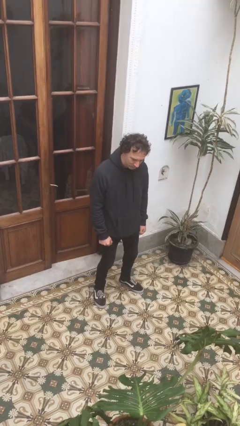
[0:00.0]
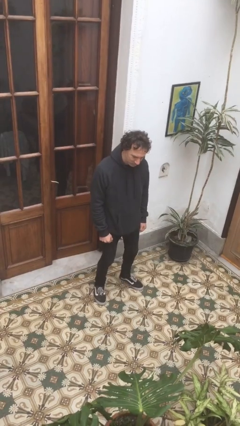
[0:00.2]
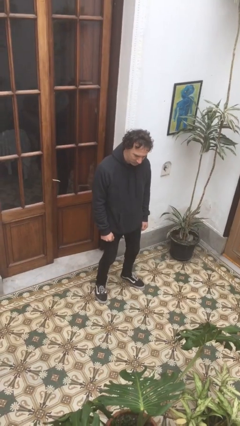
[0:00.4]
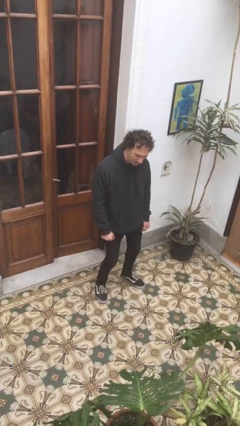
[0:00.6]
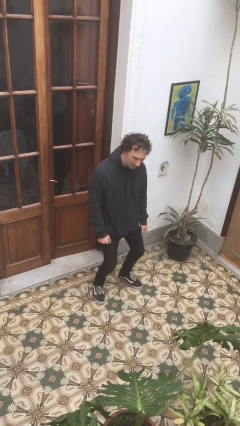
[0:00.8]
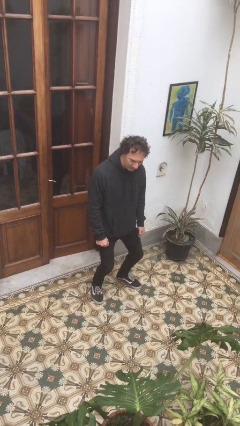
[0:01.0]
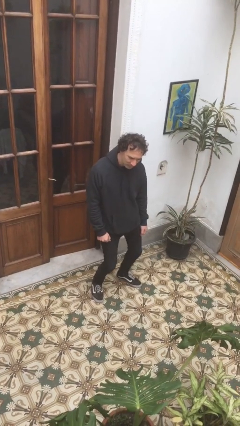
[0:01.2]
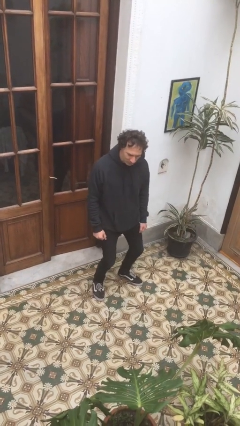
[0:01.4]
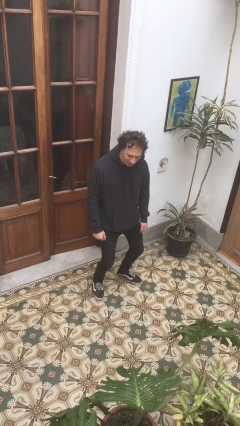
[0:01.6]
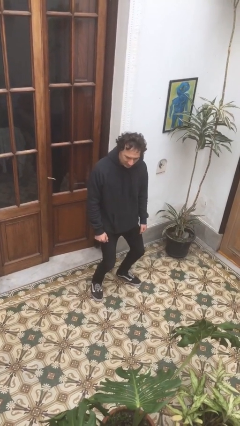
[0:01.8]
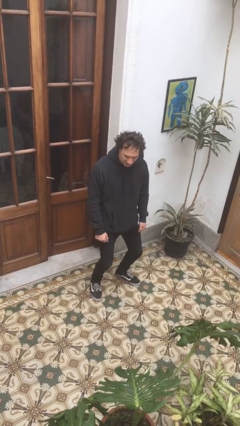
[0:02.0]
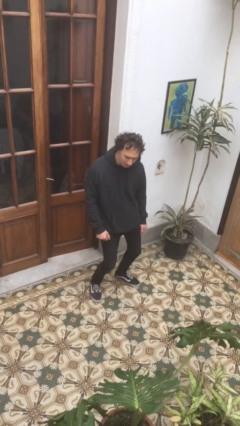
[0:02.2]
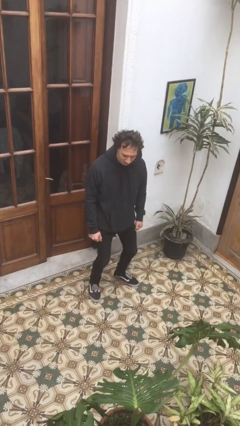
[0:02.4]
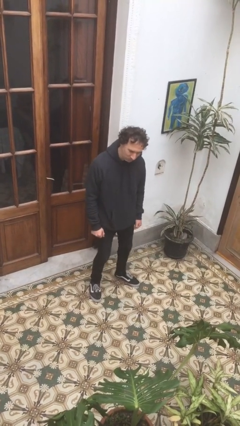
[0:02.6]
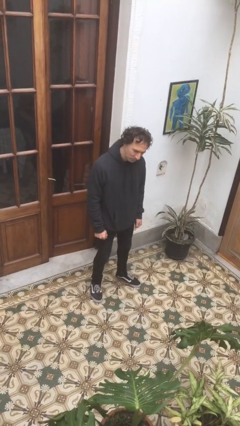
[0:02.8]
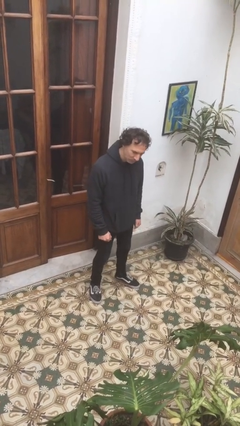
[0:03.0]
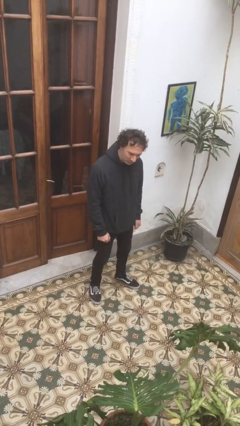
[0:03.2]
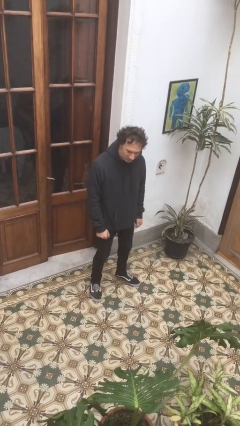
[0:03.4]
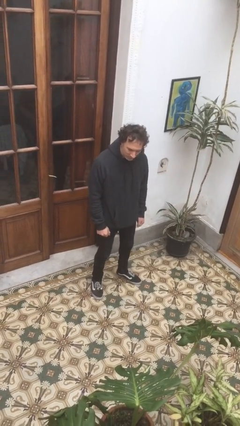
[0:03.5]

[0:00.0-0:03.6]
person wiggles hips

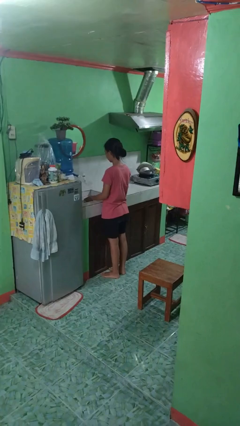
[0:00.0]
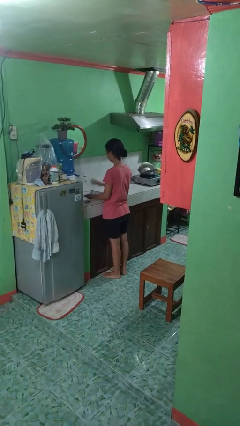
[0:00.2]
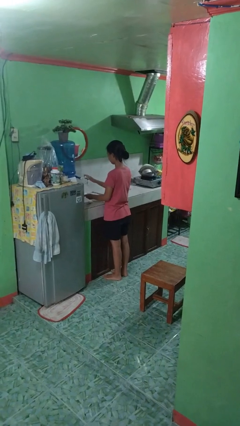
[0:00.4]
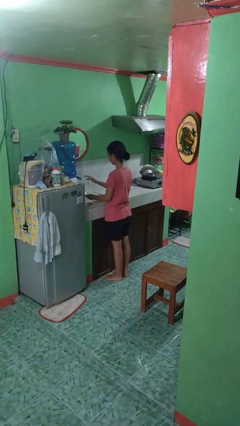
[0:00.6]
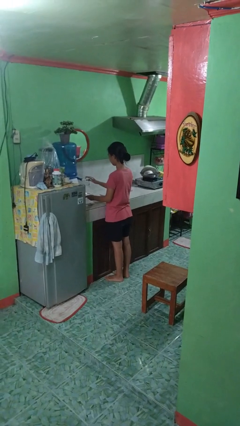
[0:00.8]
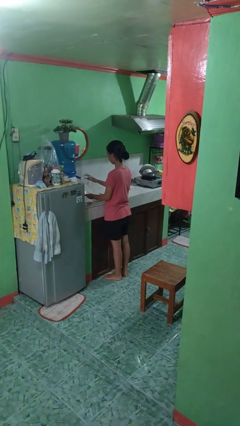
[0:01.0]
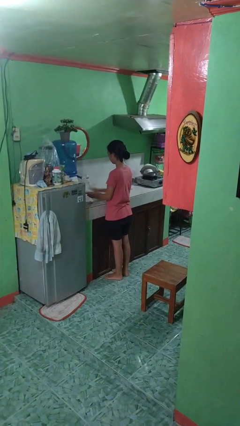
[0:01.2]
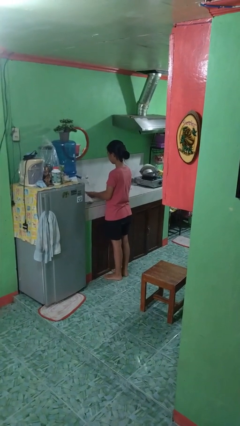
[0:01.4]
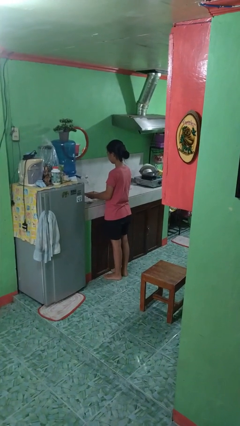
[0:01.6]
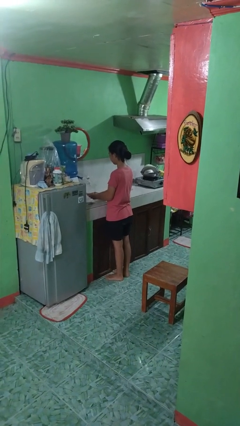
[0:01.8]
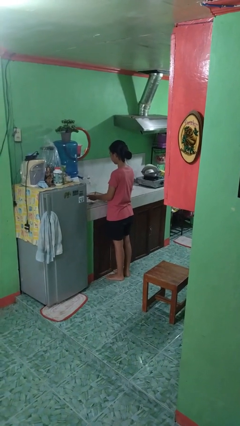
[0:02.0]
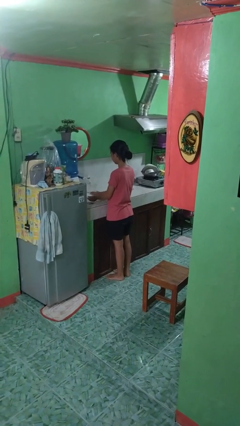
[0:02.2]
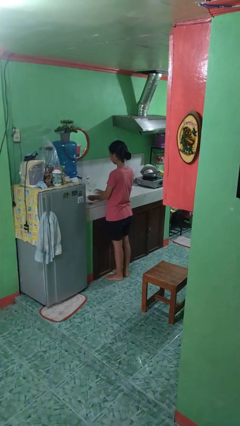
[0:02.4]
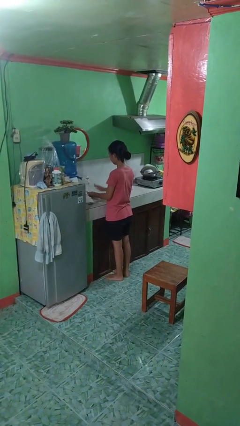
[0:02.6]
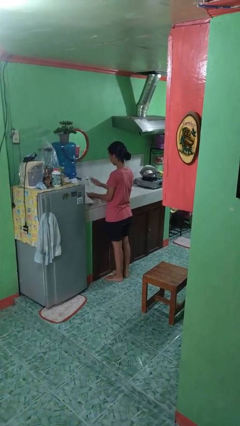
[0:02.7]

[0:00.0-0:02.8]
person washes dish

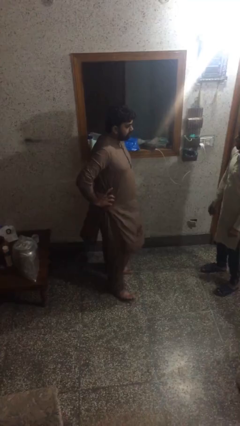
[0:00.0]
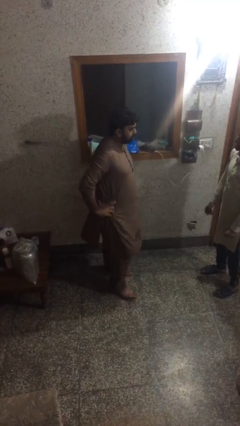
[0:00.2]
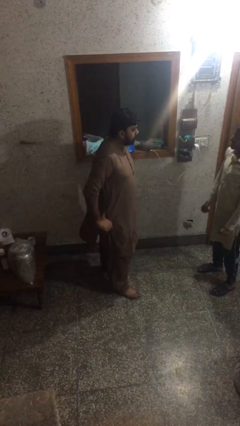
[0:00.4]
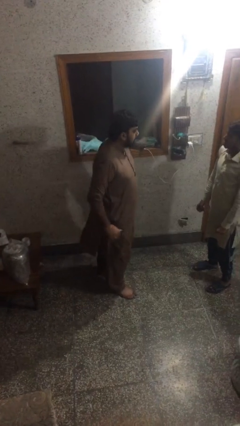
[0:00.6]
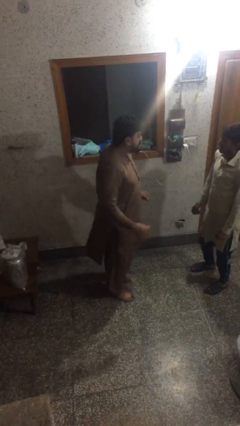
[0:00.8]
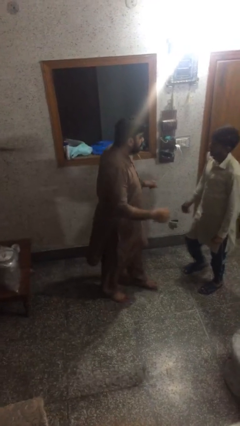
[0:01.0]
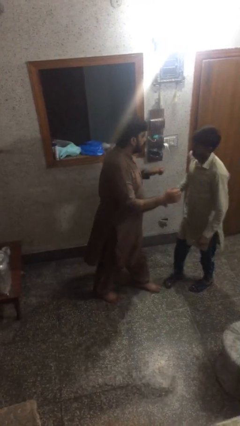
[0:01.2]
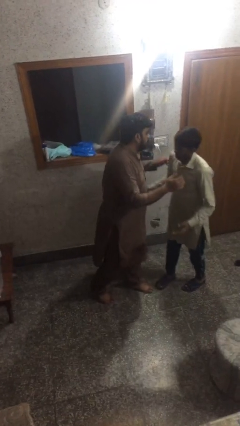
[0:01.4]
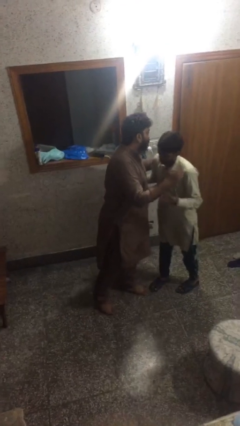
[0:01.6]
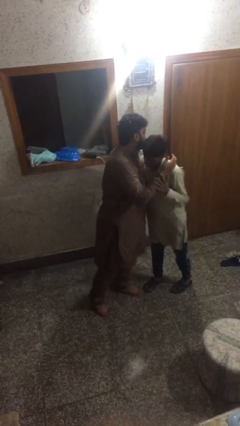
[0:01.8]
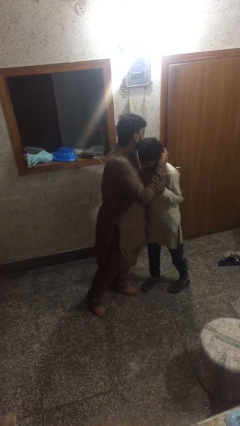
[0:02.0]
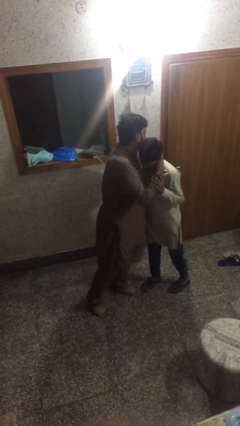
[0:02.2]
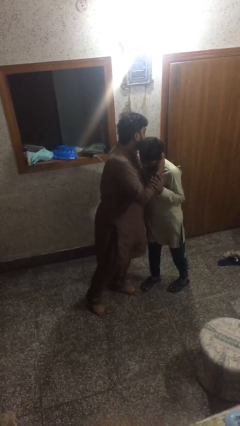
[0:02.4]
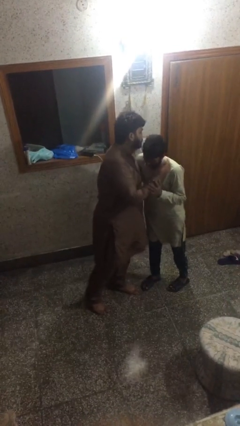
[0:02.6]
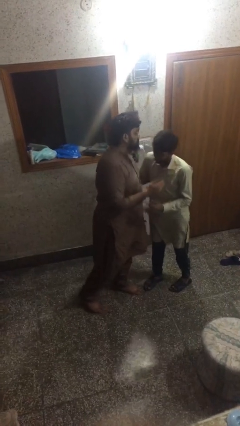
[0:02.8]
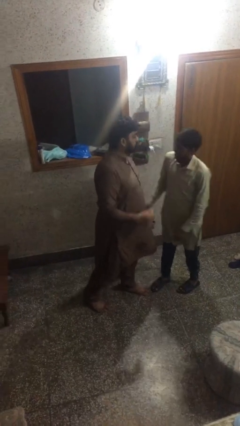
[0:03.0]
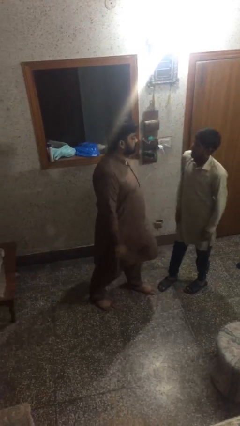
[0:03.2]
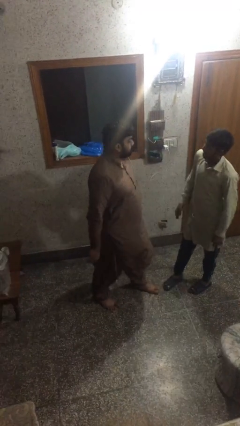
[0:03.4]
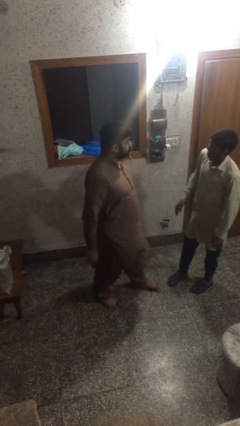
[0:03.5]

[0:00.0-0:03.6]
person embraces person

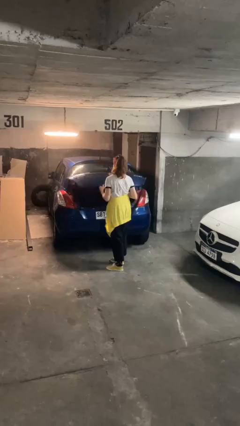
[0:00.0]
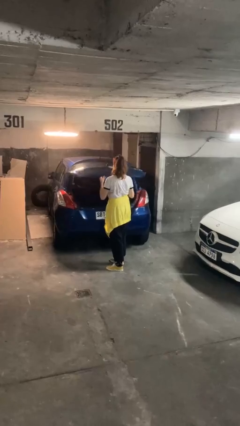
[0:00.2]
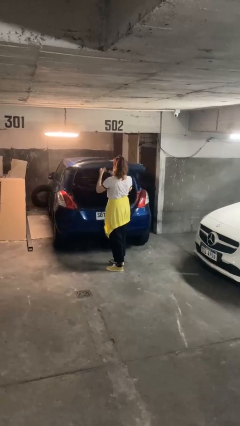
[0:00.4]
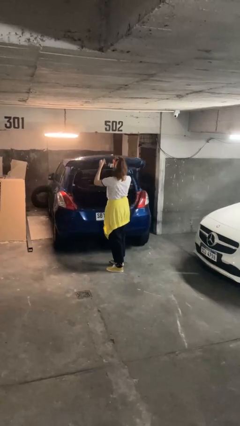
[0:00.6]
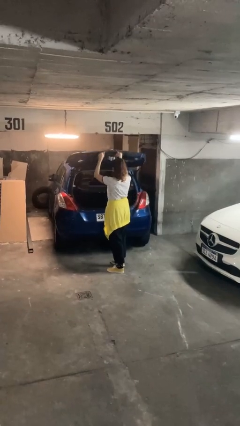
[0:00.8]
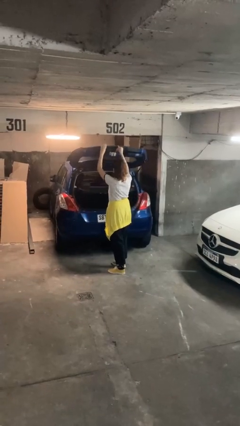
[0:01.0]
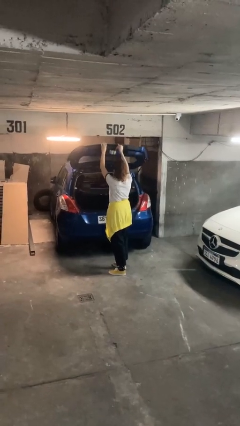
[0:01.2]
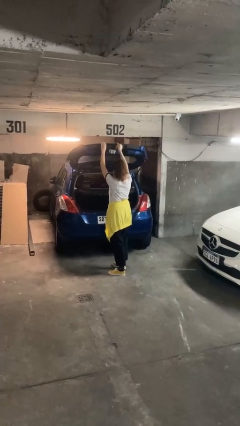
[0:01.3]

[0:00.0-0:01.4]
person opens car trunk

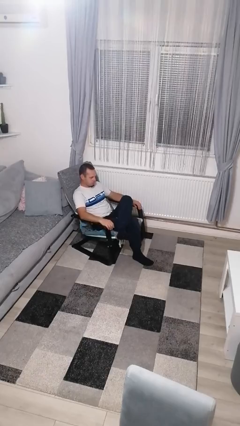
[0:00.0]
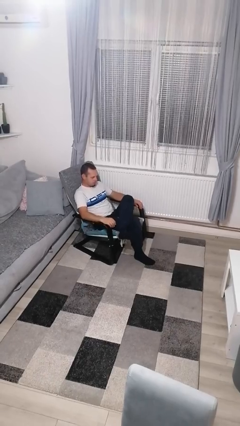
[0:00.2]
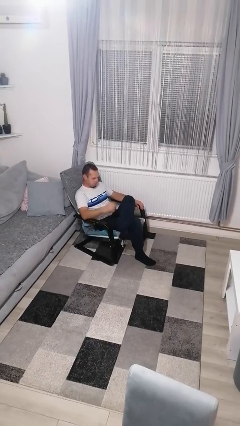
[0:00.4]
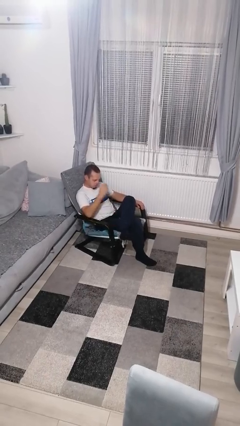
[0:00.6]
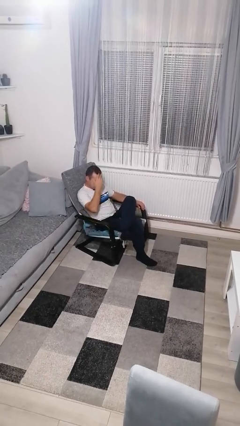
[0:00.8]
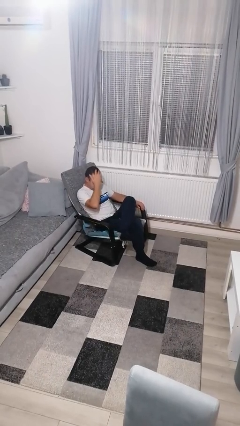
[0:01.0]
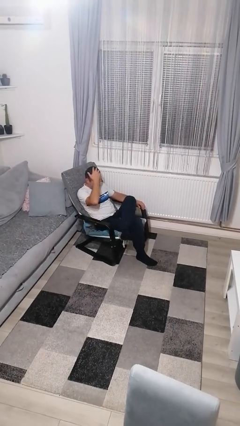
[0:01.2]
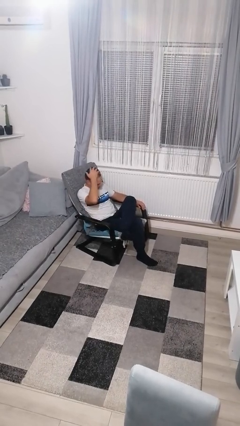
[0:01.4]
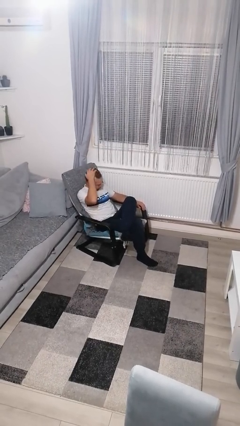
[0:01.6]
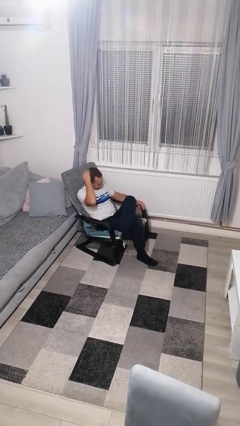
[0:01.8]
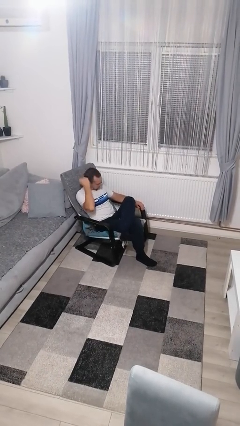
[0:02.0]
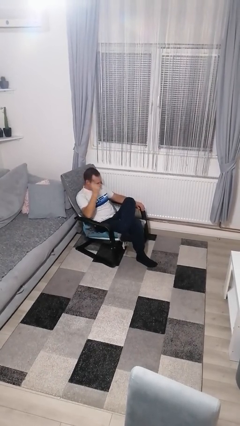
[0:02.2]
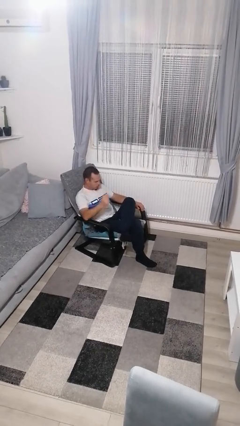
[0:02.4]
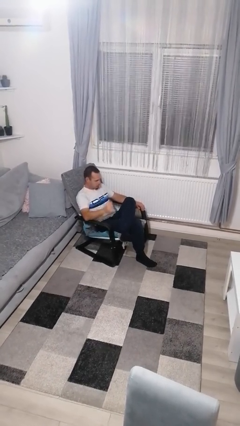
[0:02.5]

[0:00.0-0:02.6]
person strokes hair

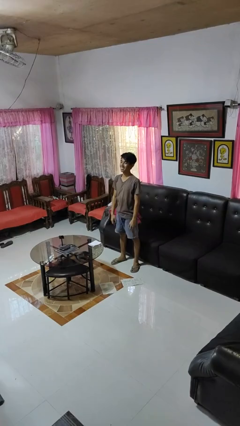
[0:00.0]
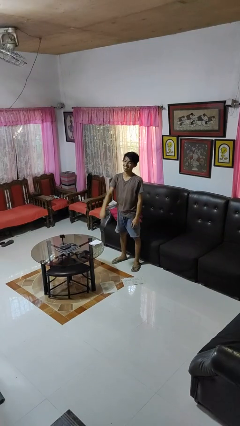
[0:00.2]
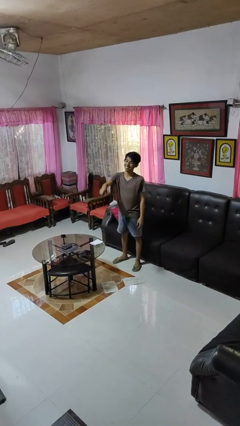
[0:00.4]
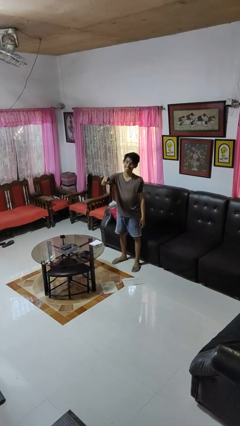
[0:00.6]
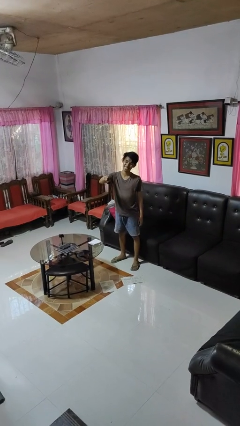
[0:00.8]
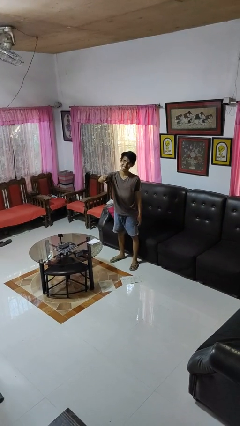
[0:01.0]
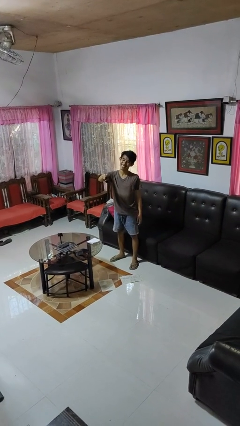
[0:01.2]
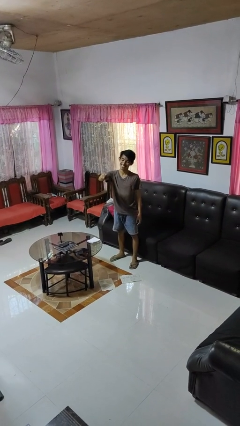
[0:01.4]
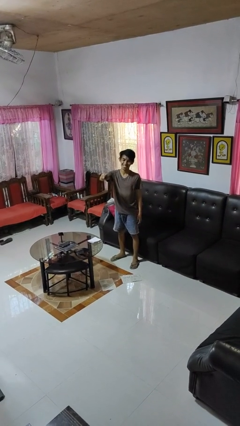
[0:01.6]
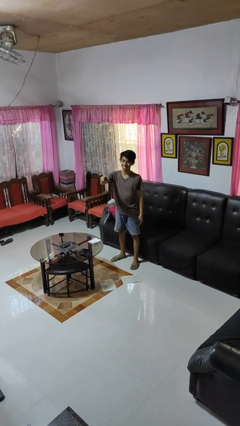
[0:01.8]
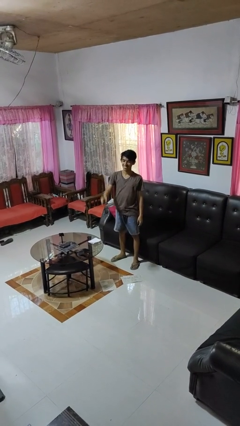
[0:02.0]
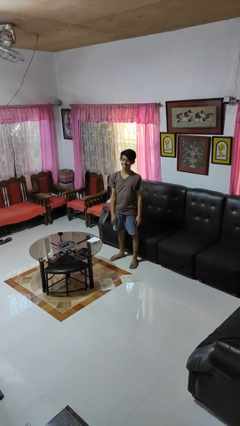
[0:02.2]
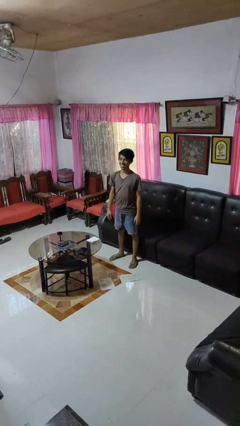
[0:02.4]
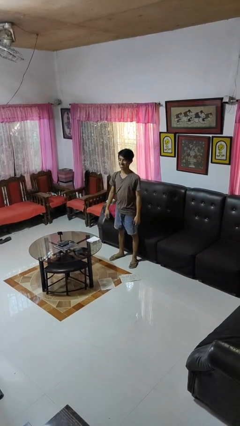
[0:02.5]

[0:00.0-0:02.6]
person points at person

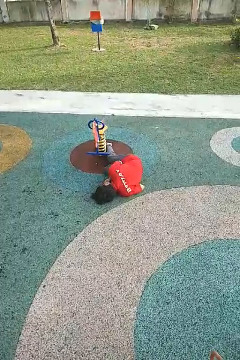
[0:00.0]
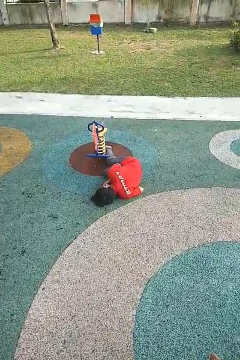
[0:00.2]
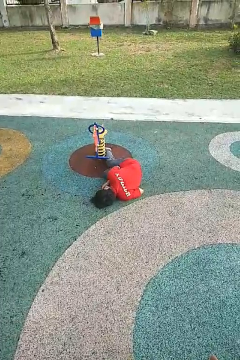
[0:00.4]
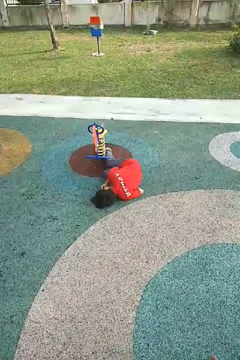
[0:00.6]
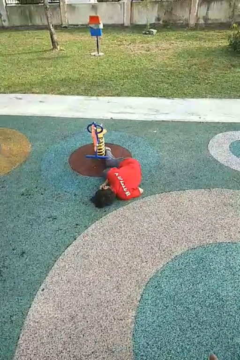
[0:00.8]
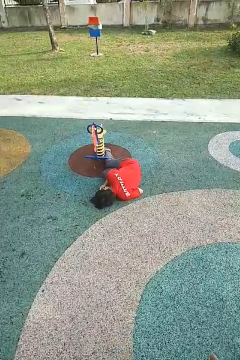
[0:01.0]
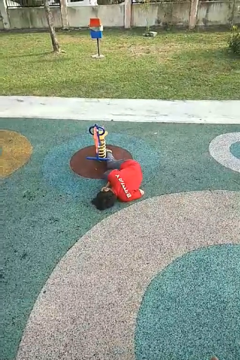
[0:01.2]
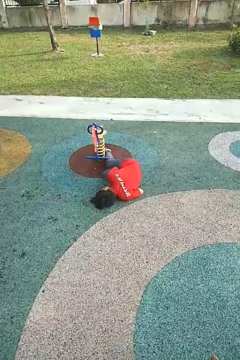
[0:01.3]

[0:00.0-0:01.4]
person lies down on floor
